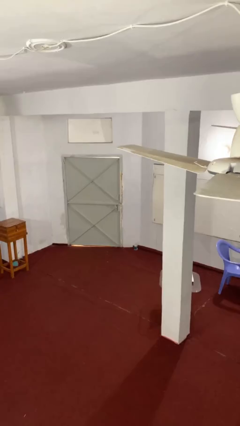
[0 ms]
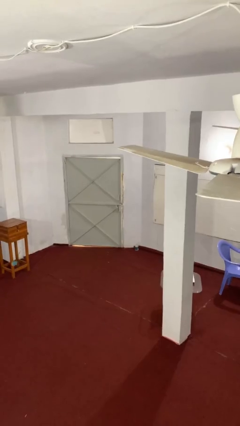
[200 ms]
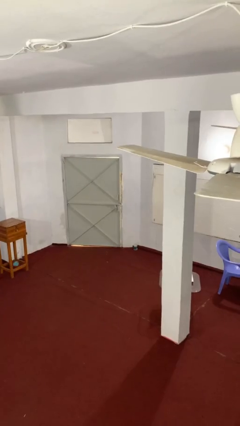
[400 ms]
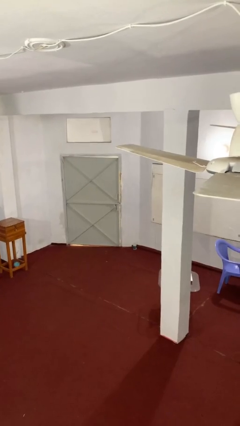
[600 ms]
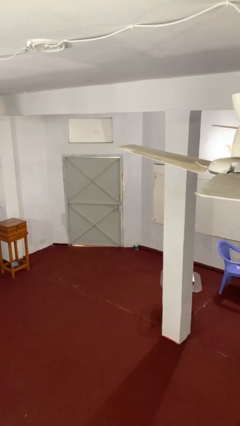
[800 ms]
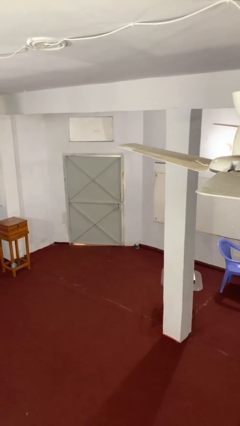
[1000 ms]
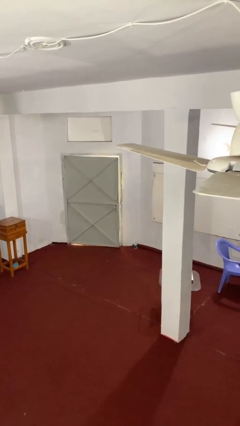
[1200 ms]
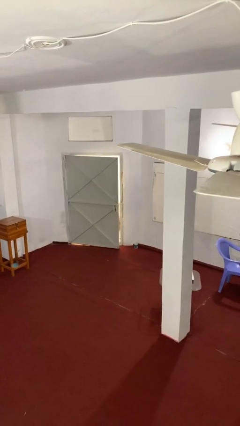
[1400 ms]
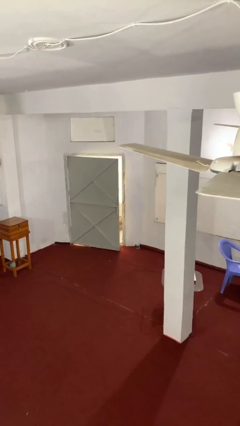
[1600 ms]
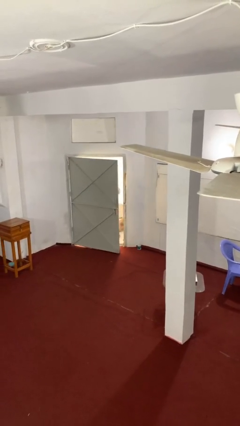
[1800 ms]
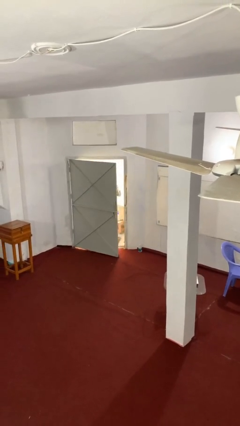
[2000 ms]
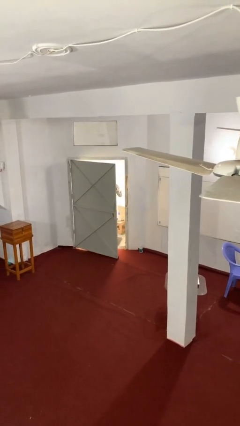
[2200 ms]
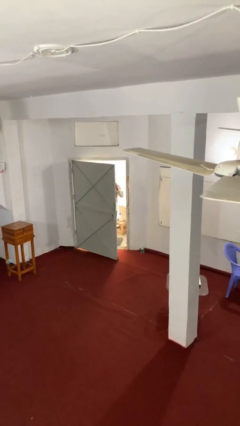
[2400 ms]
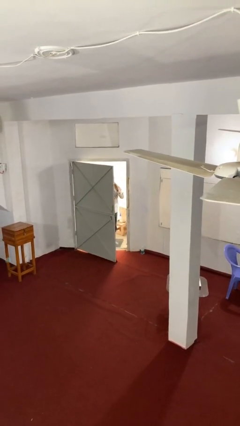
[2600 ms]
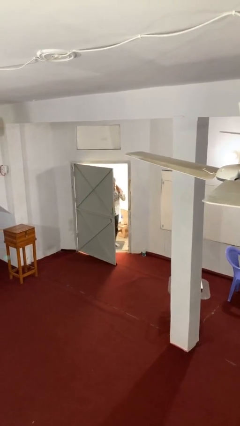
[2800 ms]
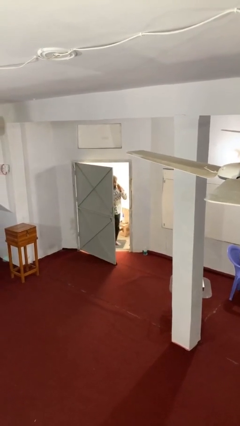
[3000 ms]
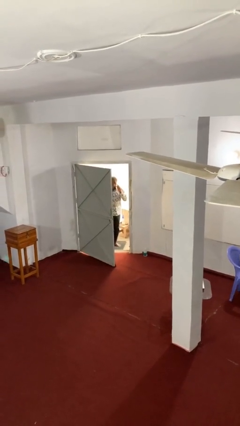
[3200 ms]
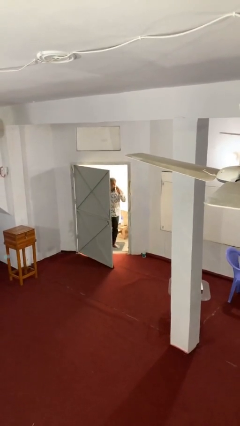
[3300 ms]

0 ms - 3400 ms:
person opens facility door

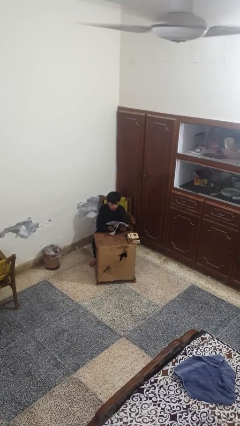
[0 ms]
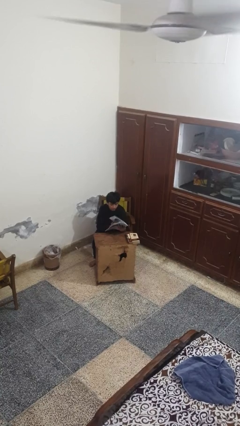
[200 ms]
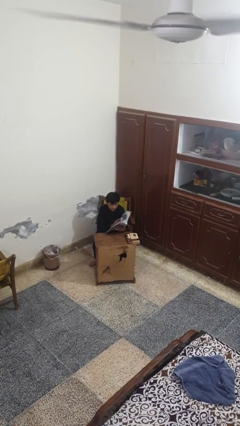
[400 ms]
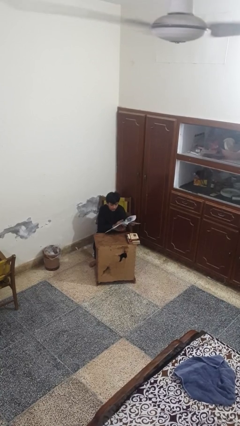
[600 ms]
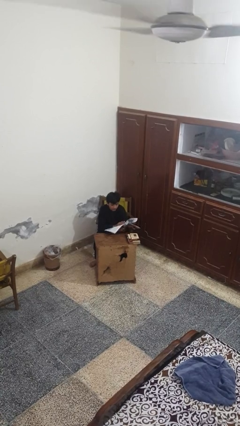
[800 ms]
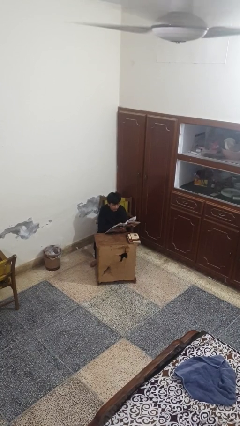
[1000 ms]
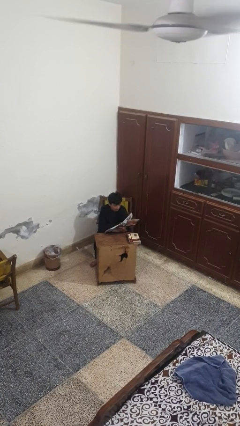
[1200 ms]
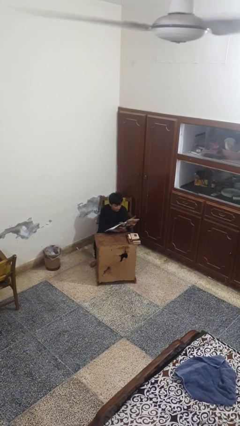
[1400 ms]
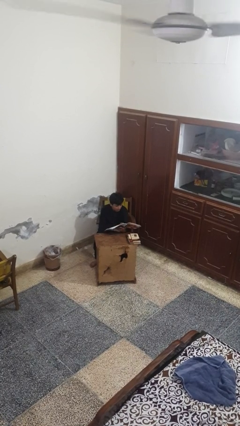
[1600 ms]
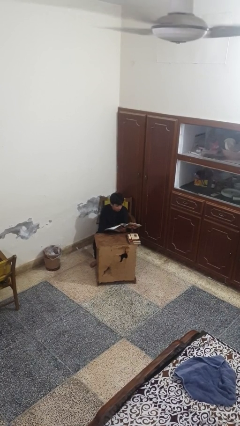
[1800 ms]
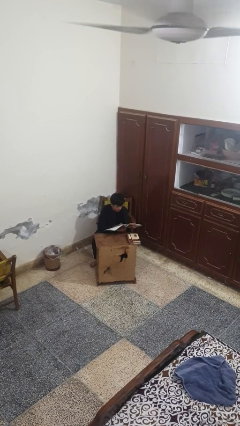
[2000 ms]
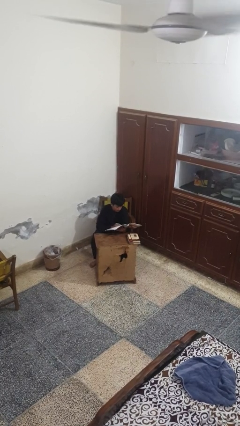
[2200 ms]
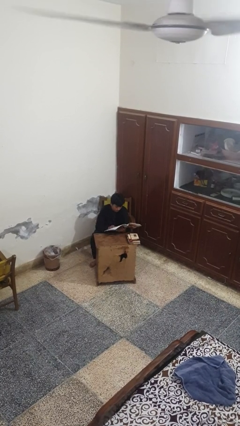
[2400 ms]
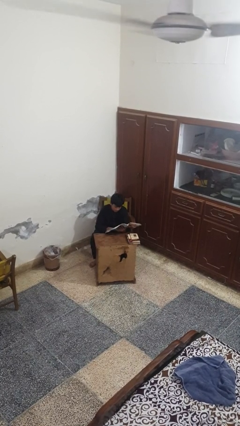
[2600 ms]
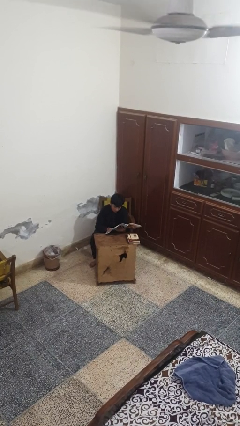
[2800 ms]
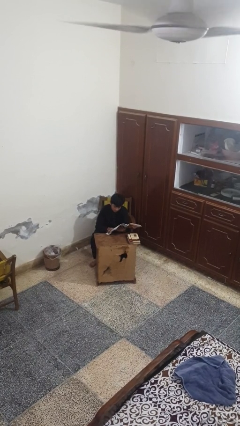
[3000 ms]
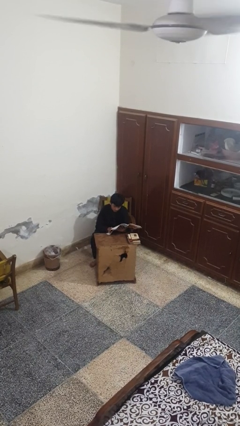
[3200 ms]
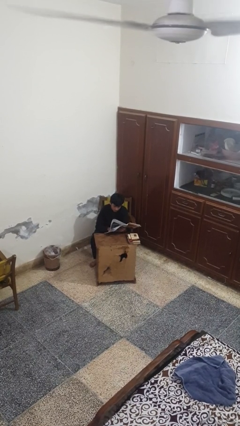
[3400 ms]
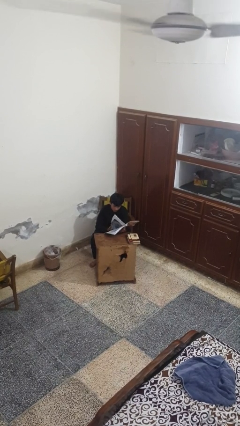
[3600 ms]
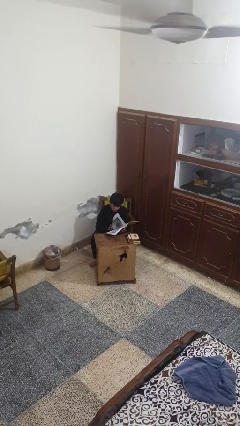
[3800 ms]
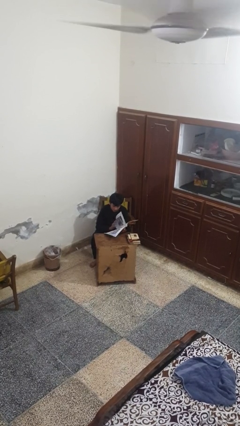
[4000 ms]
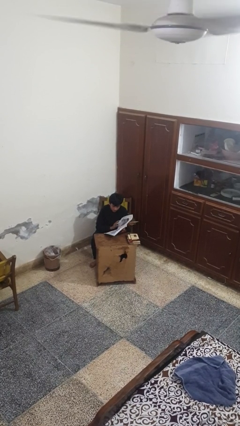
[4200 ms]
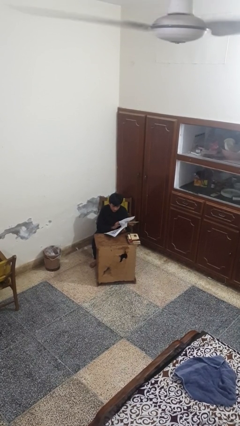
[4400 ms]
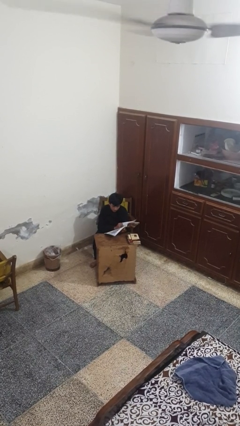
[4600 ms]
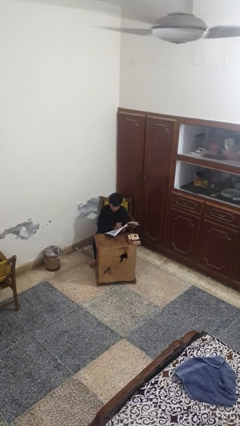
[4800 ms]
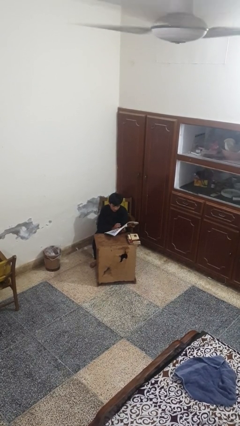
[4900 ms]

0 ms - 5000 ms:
person reads magazine

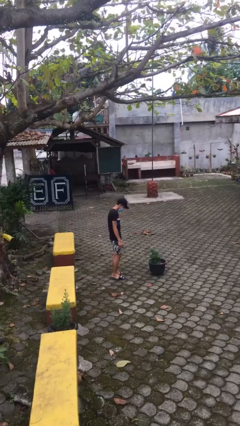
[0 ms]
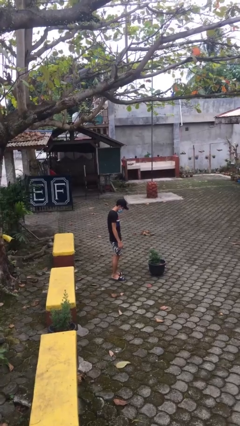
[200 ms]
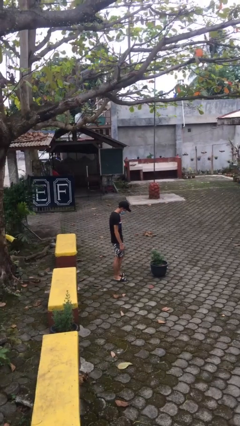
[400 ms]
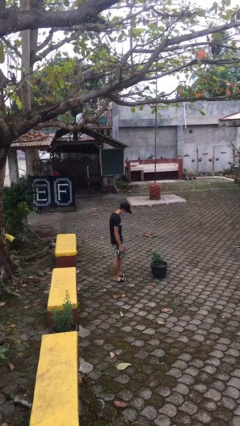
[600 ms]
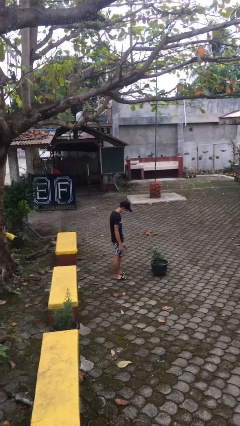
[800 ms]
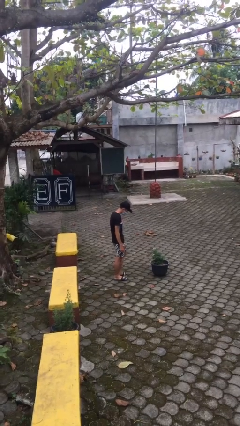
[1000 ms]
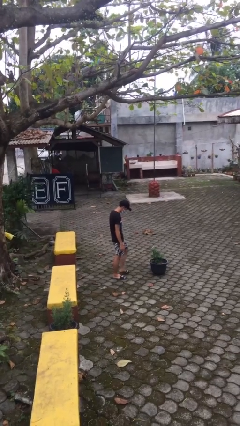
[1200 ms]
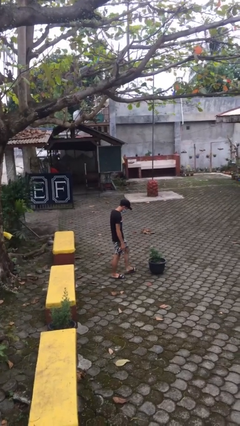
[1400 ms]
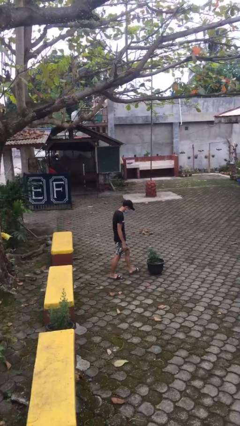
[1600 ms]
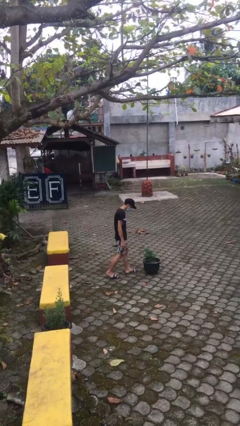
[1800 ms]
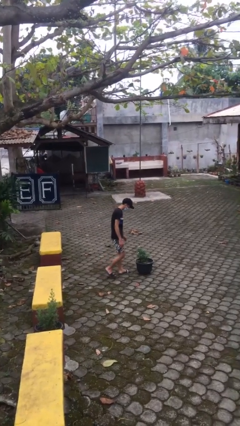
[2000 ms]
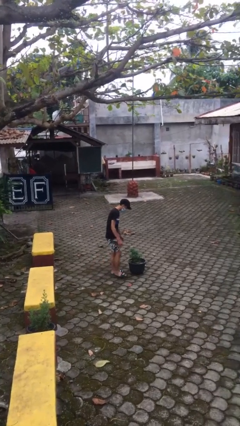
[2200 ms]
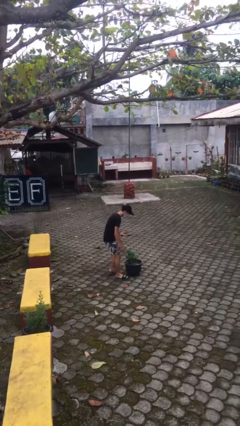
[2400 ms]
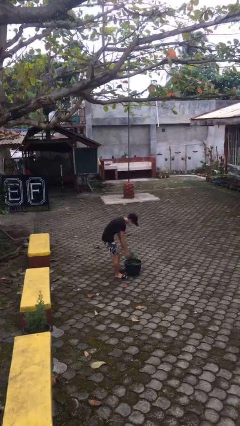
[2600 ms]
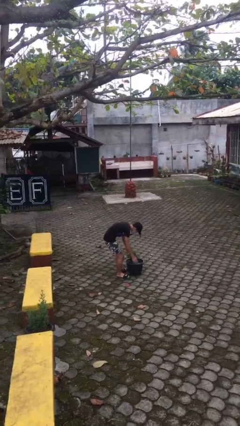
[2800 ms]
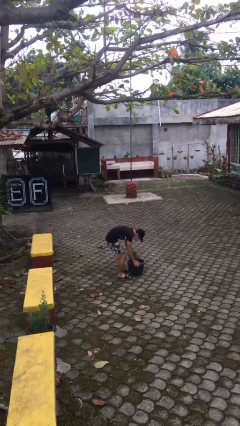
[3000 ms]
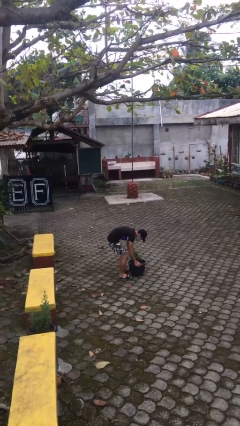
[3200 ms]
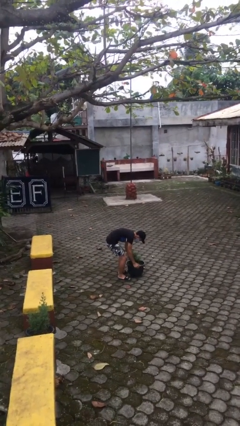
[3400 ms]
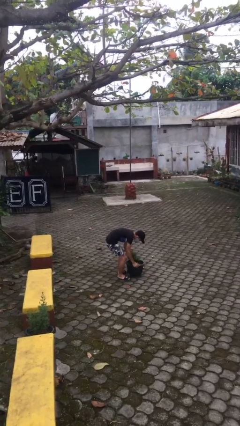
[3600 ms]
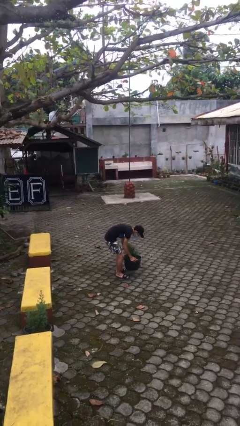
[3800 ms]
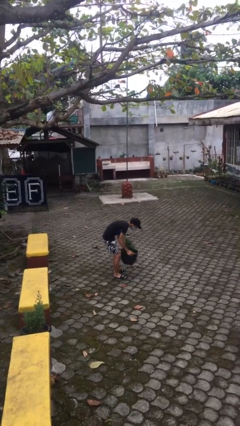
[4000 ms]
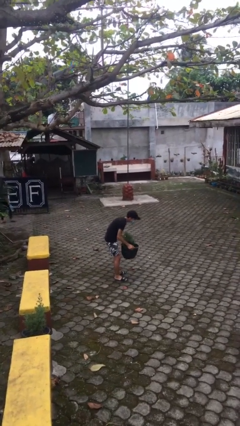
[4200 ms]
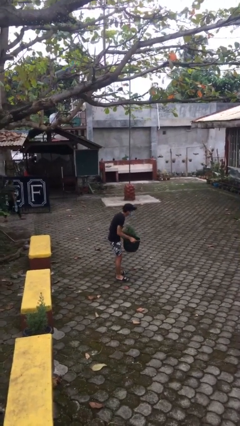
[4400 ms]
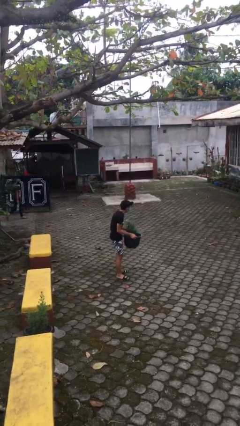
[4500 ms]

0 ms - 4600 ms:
person picks up object from floor

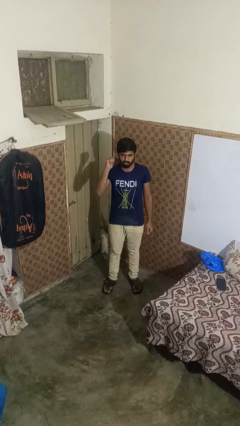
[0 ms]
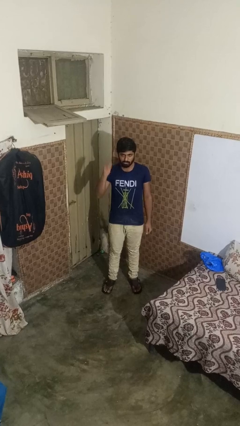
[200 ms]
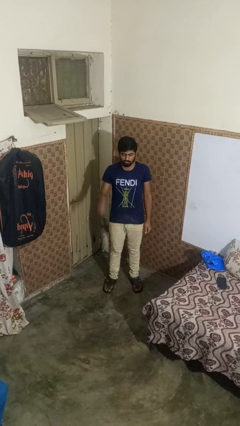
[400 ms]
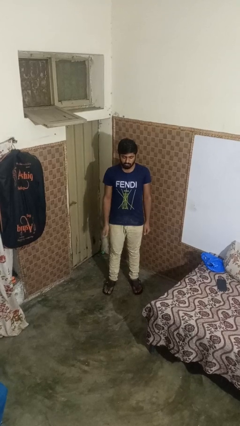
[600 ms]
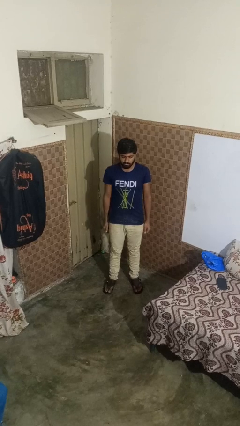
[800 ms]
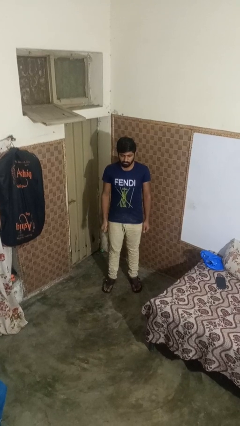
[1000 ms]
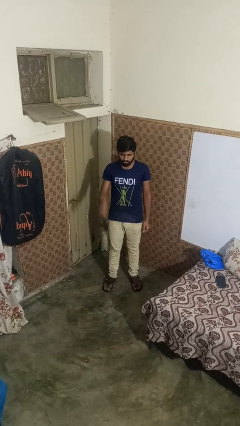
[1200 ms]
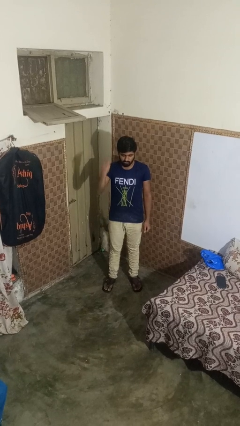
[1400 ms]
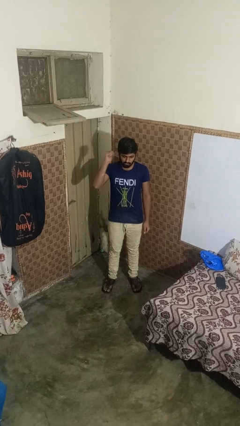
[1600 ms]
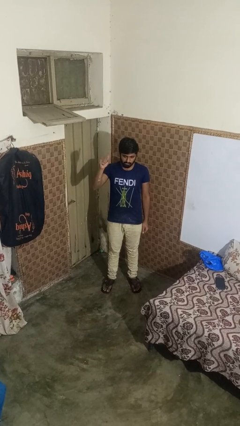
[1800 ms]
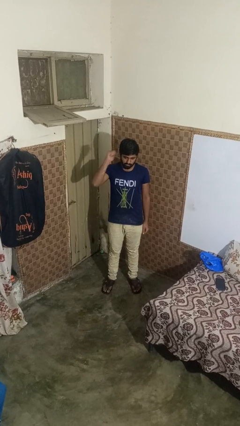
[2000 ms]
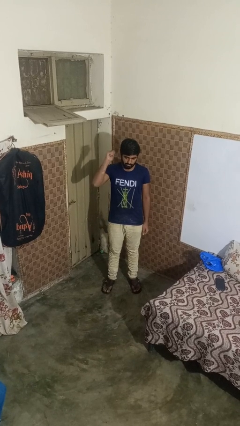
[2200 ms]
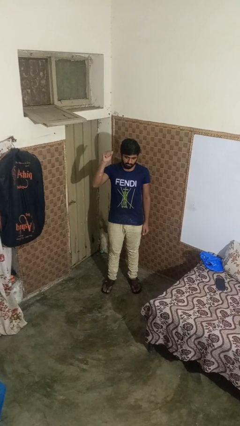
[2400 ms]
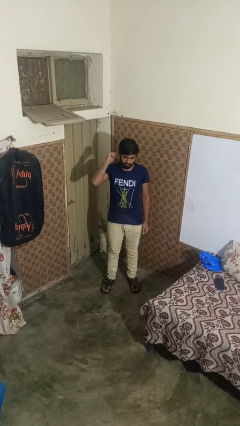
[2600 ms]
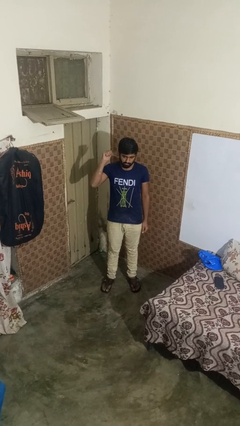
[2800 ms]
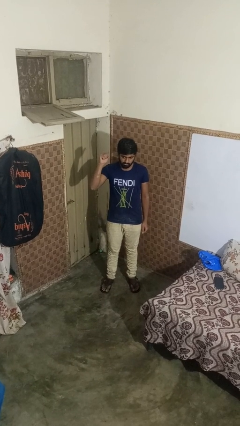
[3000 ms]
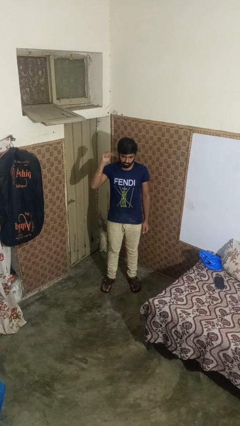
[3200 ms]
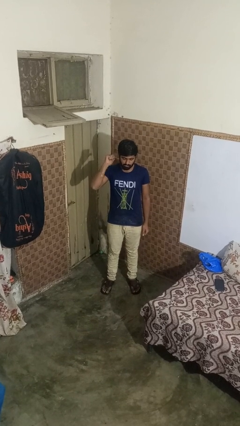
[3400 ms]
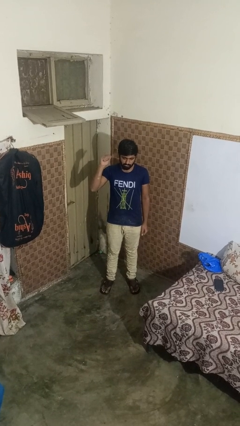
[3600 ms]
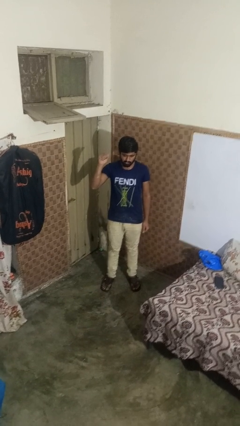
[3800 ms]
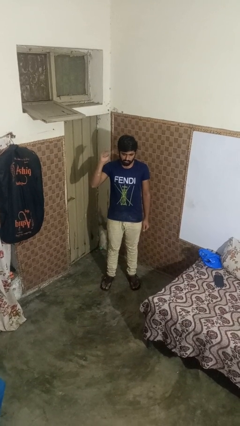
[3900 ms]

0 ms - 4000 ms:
person gestures behind me

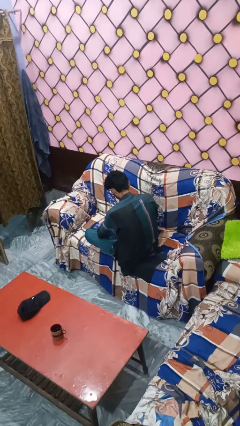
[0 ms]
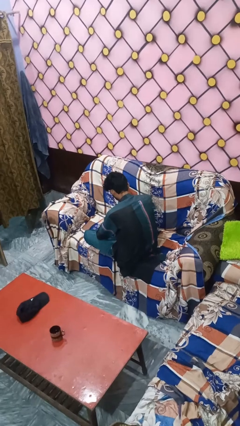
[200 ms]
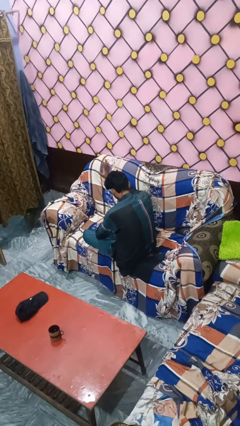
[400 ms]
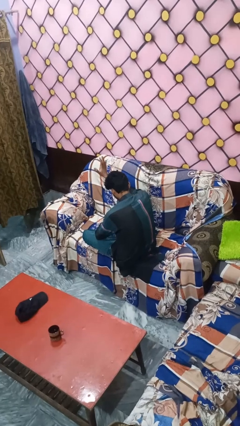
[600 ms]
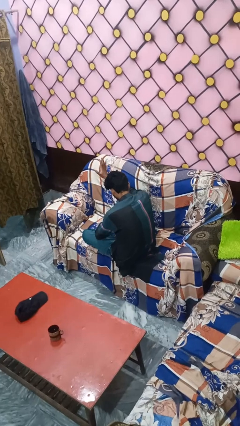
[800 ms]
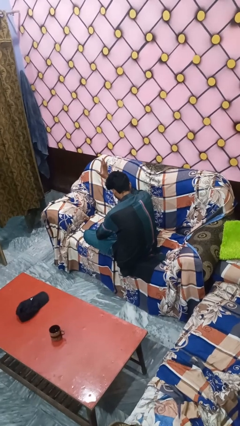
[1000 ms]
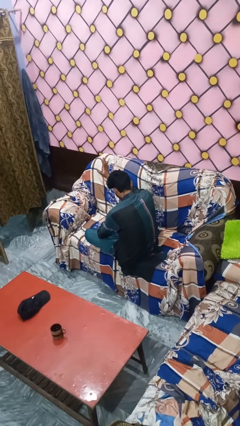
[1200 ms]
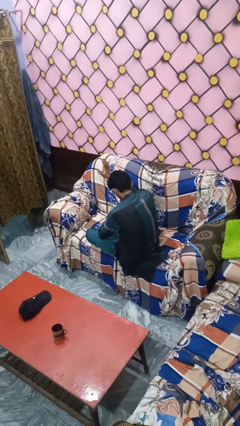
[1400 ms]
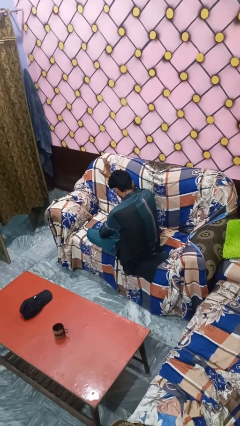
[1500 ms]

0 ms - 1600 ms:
person gestures stop
